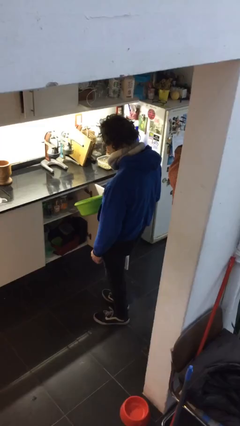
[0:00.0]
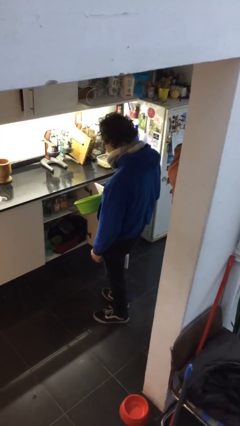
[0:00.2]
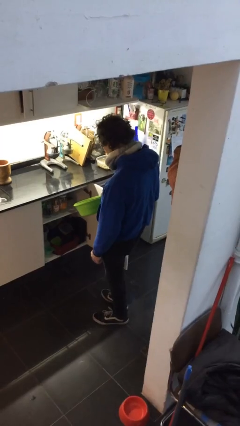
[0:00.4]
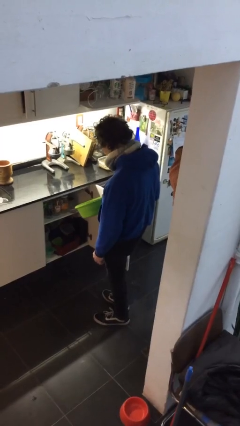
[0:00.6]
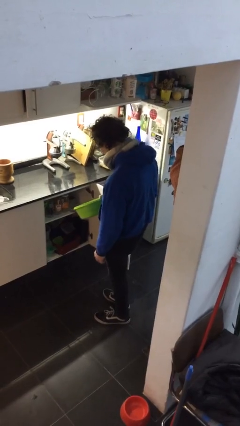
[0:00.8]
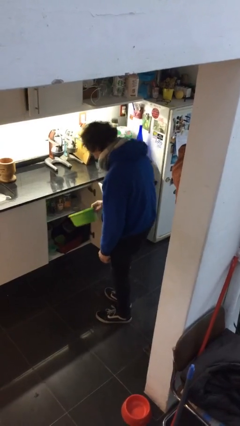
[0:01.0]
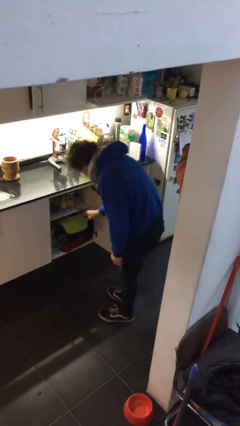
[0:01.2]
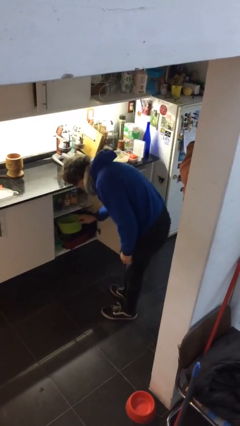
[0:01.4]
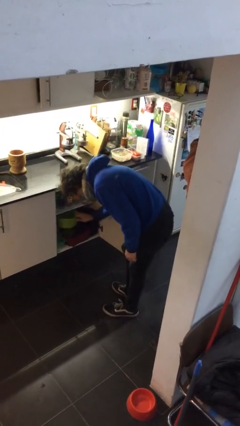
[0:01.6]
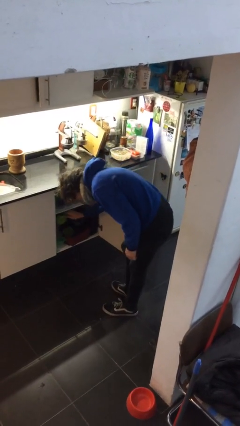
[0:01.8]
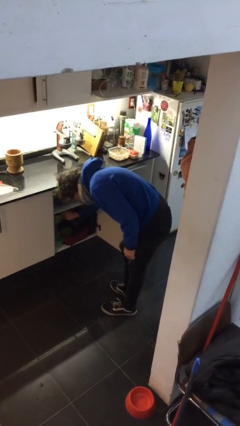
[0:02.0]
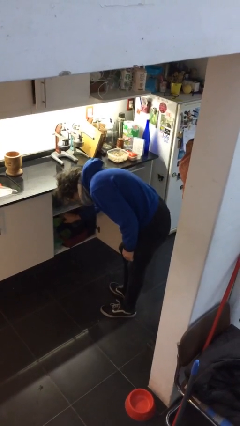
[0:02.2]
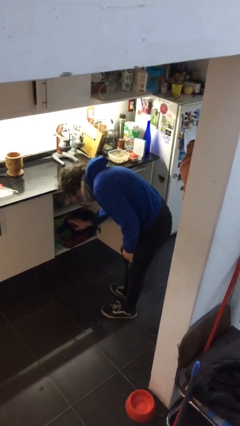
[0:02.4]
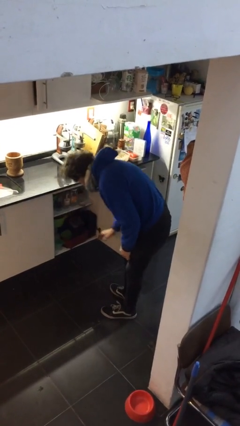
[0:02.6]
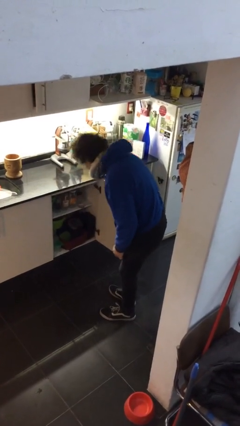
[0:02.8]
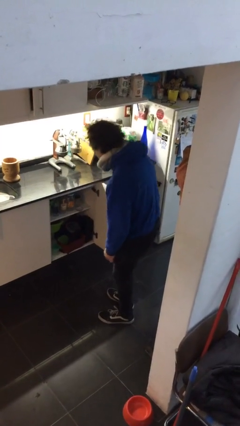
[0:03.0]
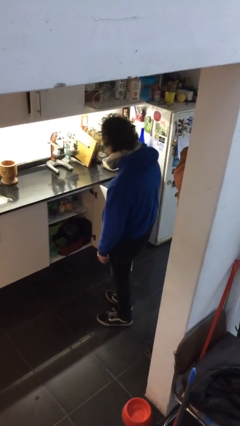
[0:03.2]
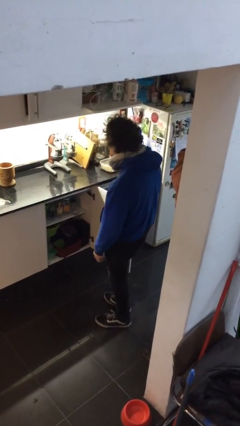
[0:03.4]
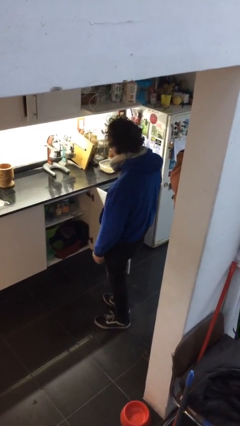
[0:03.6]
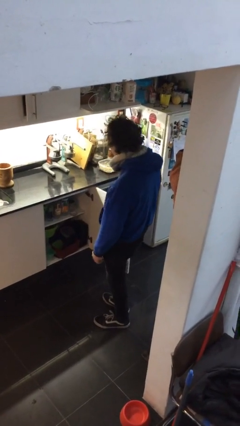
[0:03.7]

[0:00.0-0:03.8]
person puts down object into cabinet

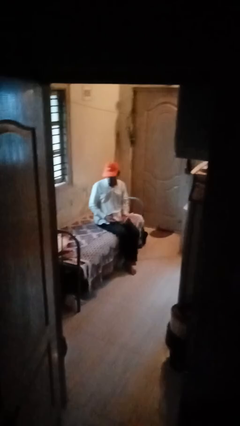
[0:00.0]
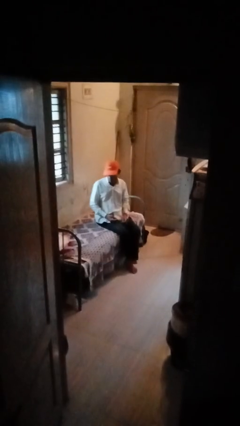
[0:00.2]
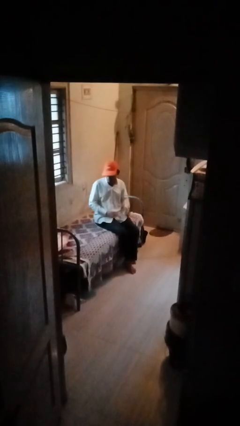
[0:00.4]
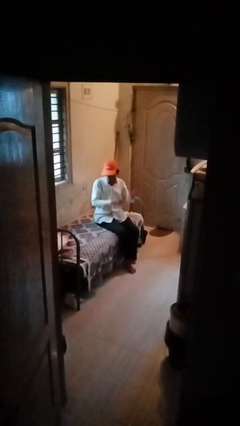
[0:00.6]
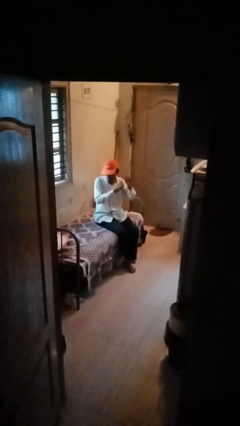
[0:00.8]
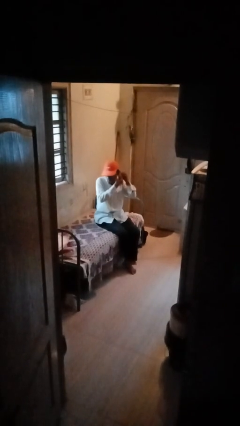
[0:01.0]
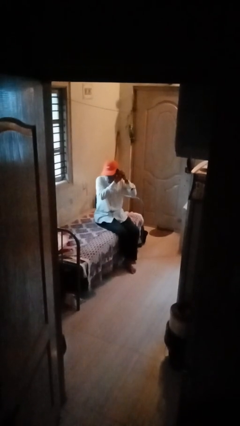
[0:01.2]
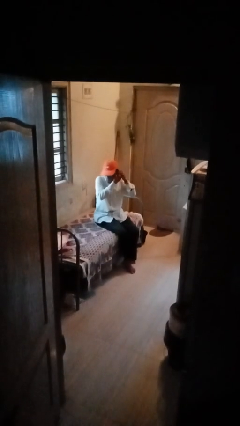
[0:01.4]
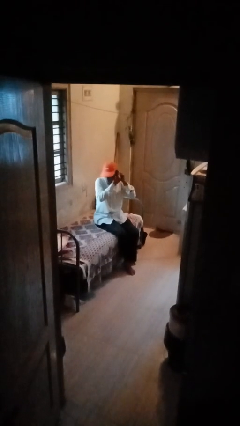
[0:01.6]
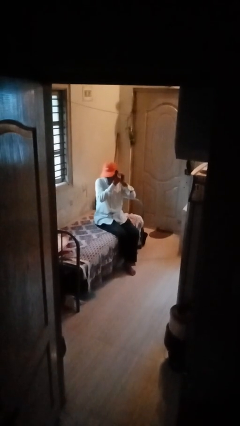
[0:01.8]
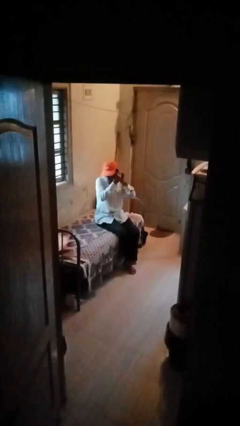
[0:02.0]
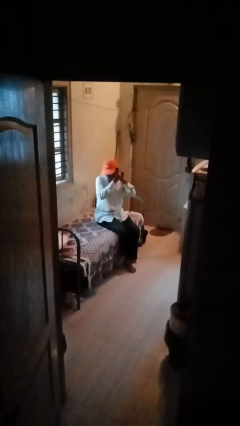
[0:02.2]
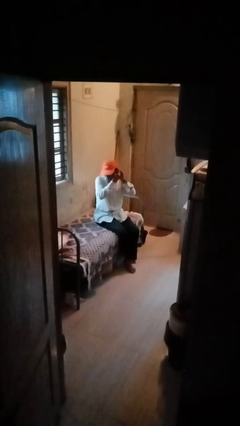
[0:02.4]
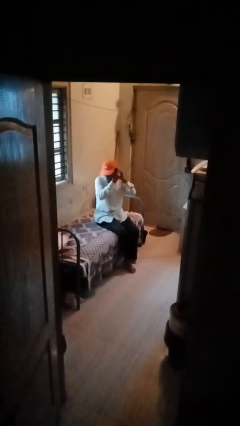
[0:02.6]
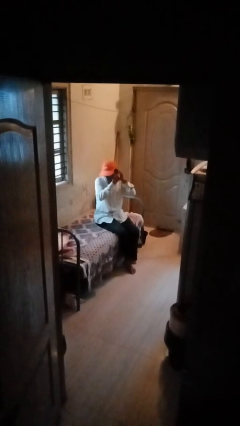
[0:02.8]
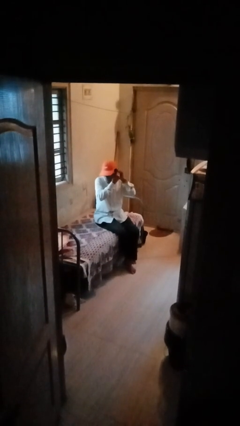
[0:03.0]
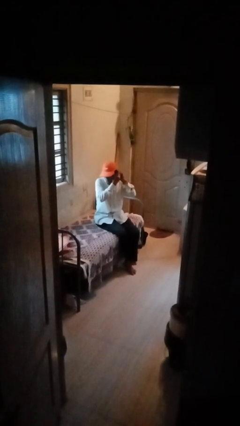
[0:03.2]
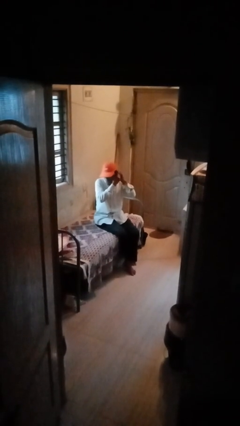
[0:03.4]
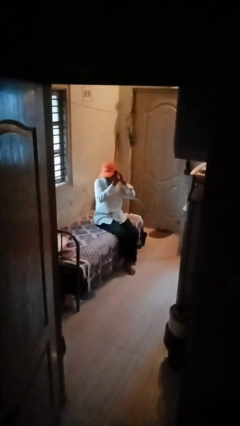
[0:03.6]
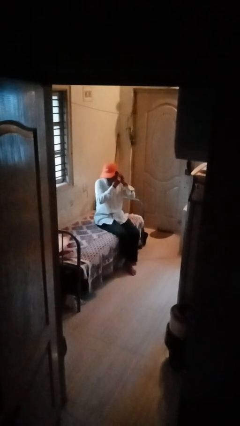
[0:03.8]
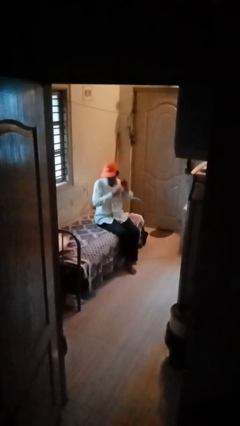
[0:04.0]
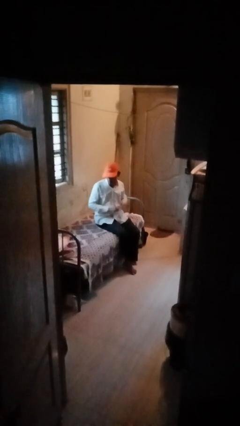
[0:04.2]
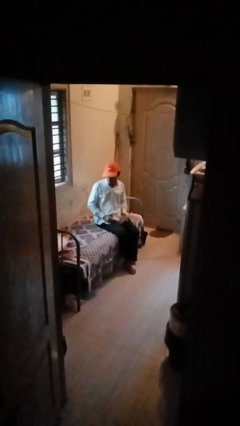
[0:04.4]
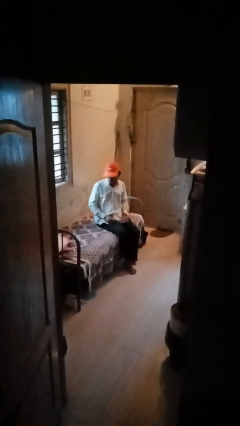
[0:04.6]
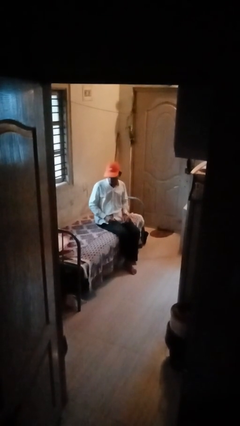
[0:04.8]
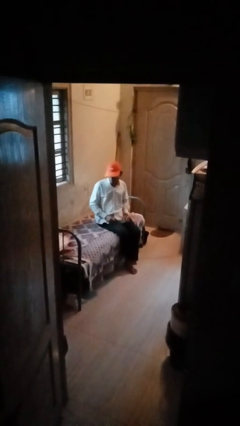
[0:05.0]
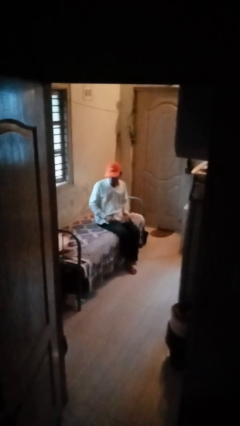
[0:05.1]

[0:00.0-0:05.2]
person takes off earrings

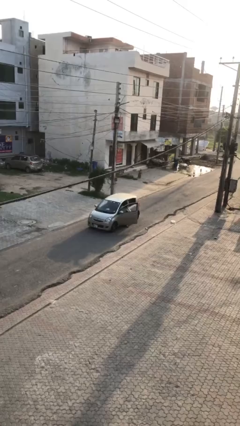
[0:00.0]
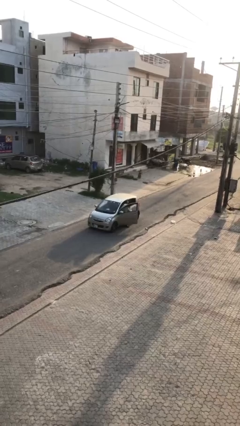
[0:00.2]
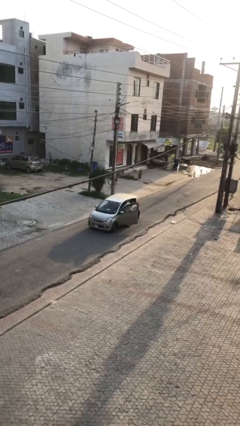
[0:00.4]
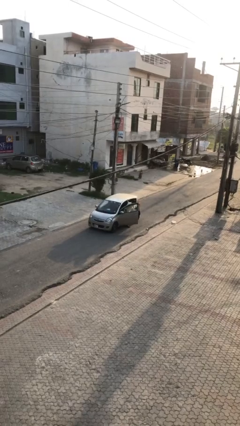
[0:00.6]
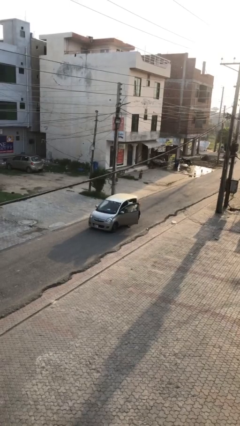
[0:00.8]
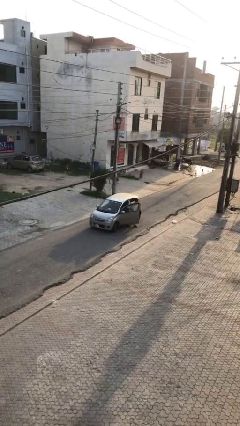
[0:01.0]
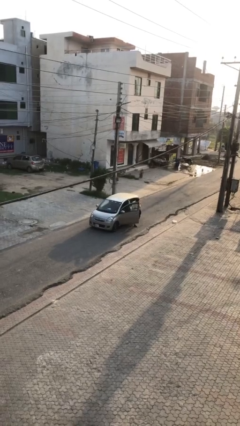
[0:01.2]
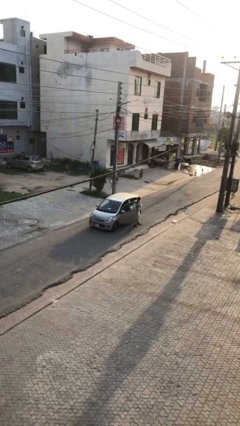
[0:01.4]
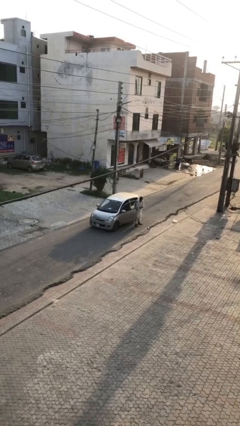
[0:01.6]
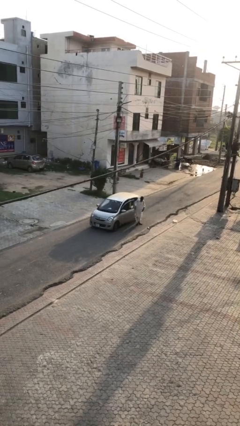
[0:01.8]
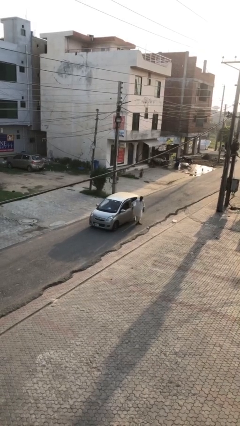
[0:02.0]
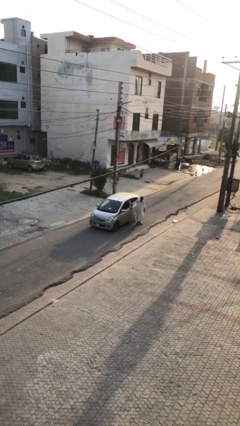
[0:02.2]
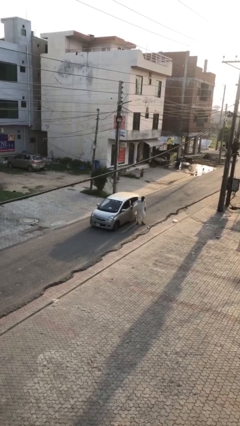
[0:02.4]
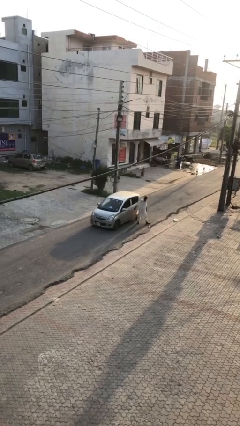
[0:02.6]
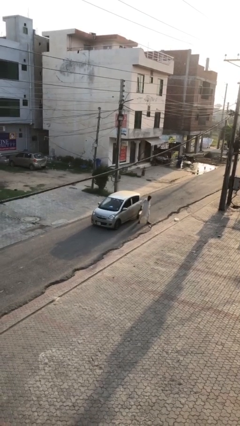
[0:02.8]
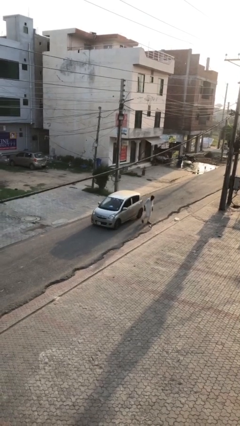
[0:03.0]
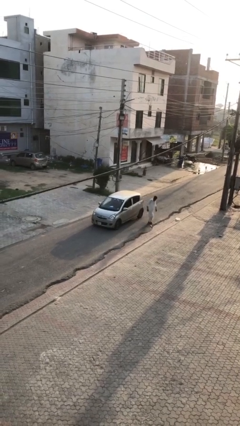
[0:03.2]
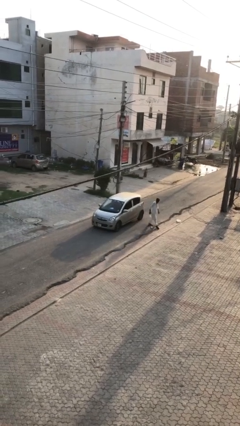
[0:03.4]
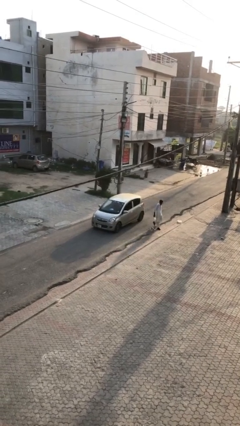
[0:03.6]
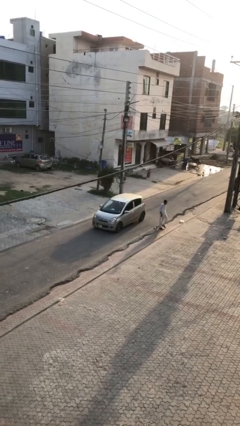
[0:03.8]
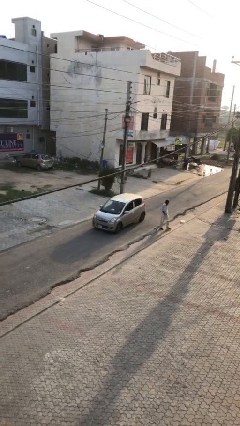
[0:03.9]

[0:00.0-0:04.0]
car drops off person

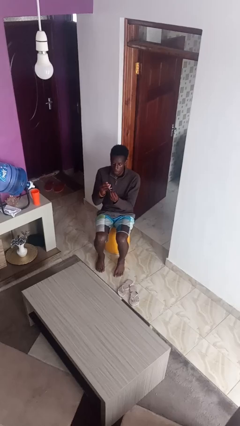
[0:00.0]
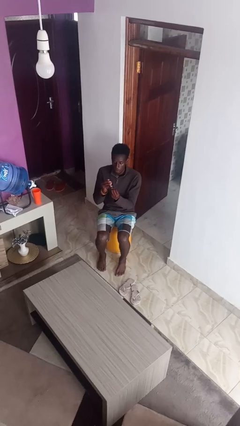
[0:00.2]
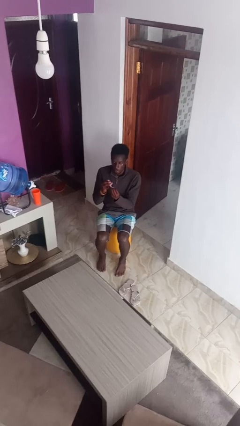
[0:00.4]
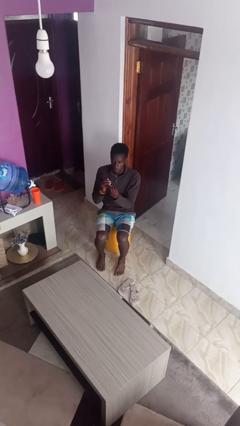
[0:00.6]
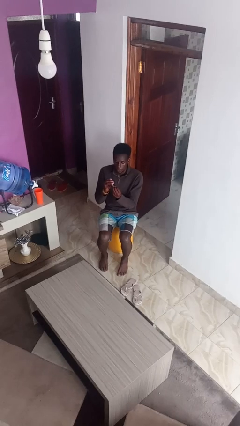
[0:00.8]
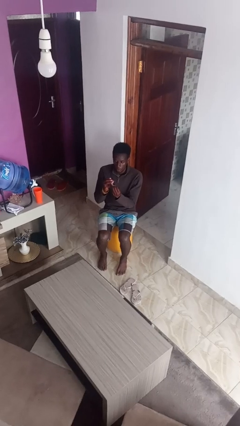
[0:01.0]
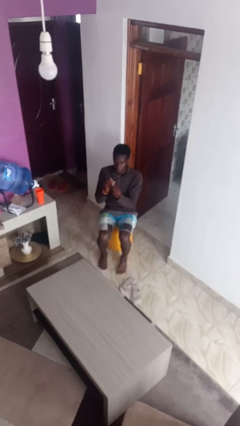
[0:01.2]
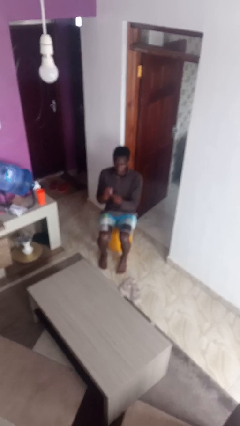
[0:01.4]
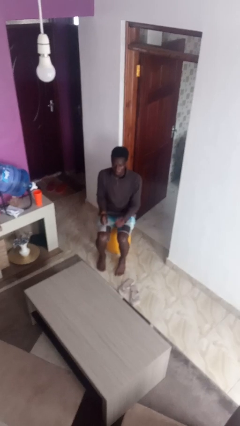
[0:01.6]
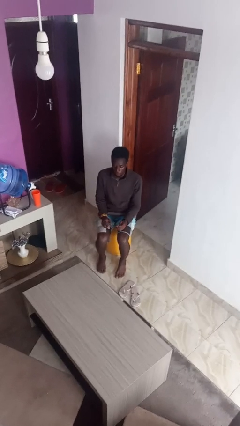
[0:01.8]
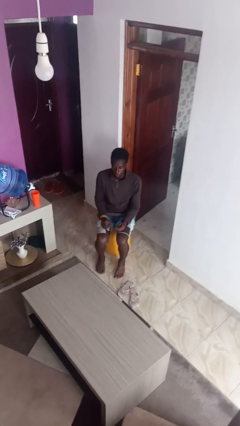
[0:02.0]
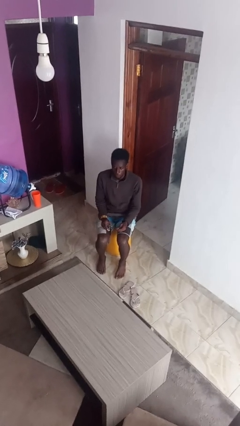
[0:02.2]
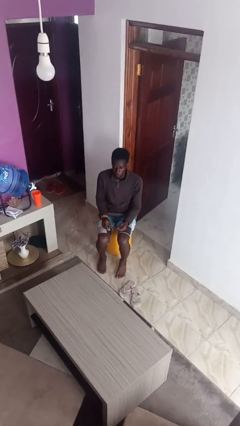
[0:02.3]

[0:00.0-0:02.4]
person clips fingernails

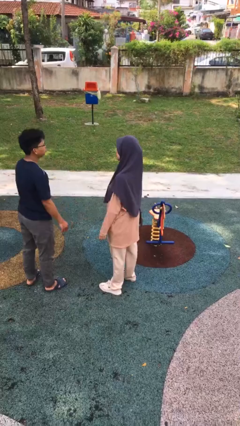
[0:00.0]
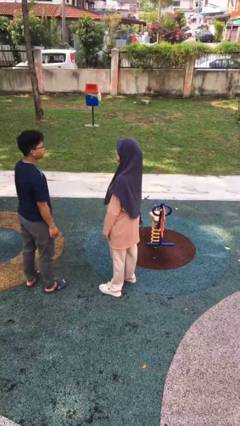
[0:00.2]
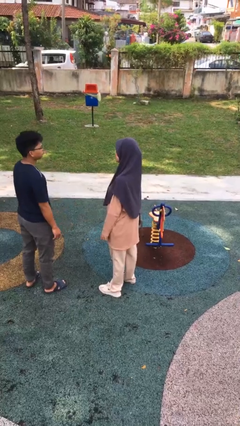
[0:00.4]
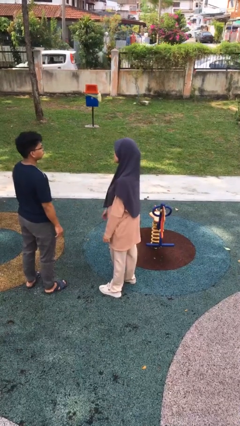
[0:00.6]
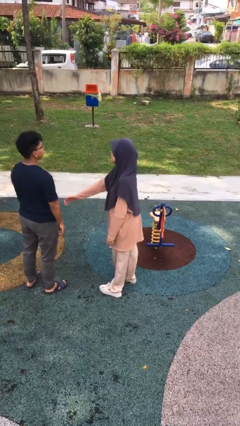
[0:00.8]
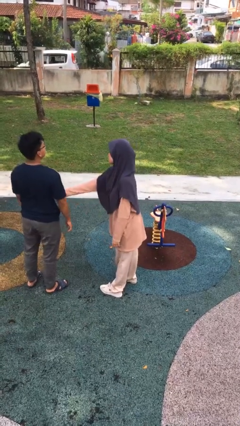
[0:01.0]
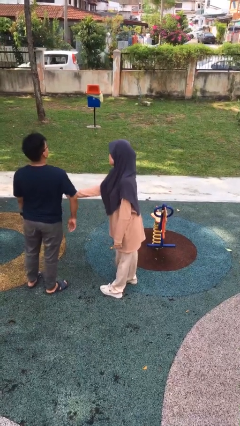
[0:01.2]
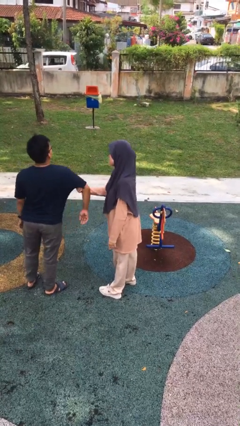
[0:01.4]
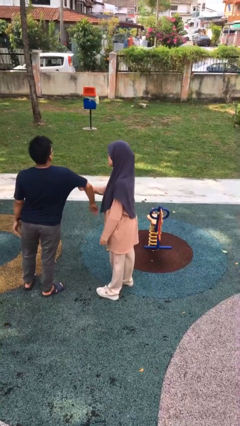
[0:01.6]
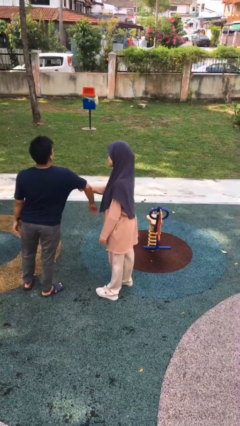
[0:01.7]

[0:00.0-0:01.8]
person grabs person by bicep

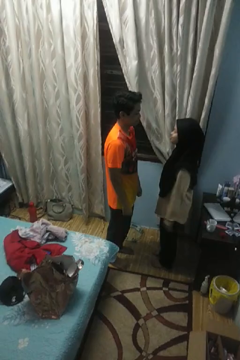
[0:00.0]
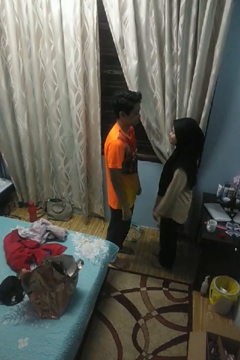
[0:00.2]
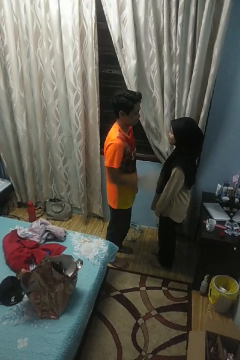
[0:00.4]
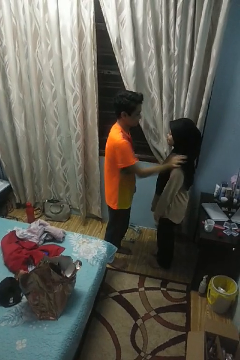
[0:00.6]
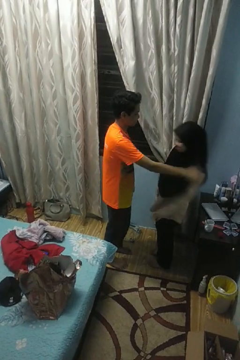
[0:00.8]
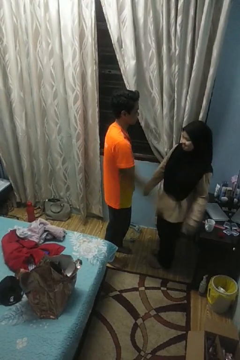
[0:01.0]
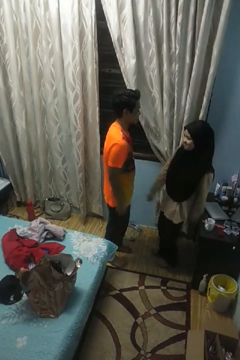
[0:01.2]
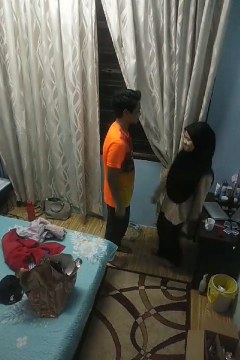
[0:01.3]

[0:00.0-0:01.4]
person shoves person
